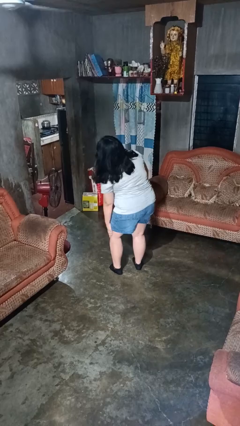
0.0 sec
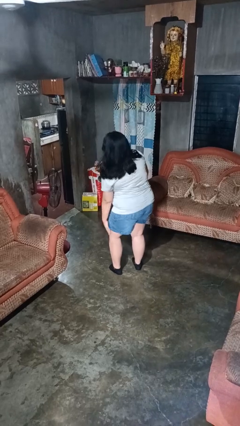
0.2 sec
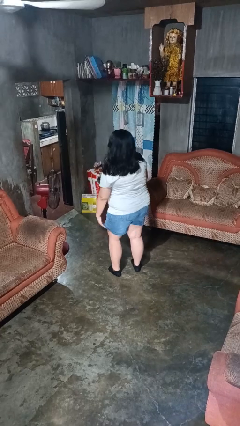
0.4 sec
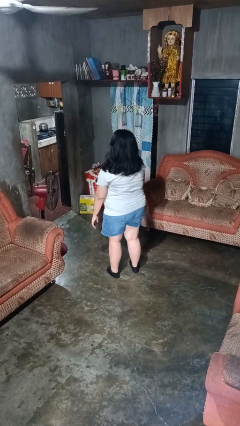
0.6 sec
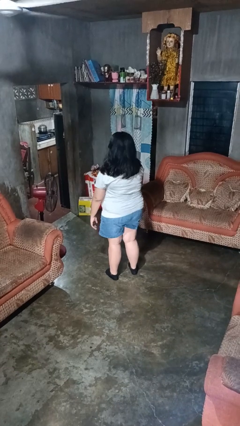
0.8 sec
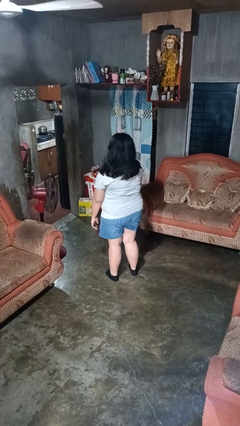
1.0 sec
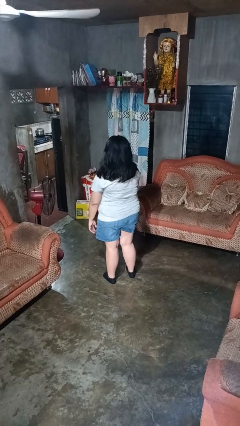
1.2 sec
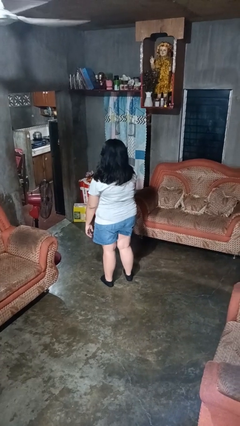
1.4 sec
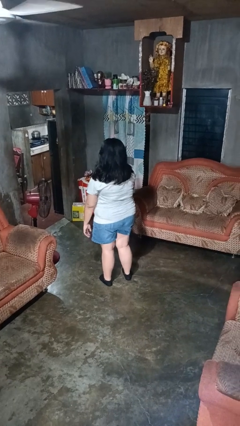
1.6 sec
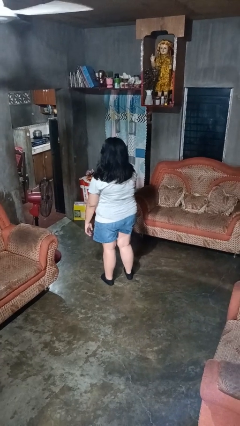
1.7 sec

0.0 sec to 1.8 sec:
person swats bug

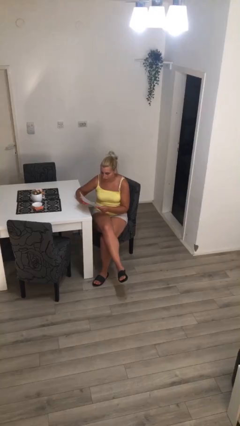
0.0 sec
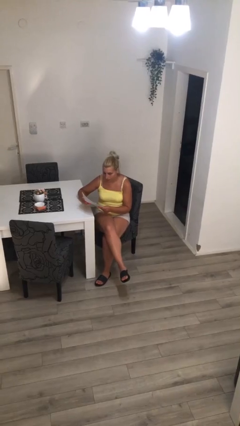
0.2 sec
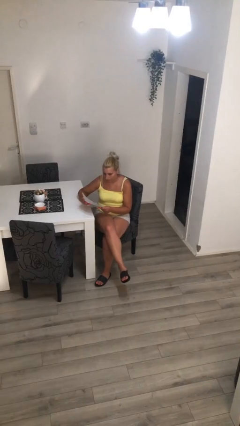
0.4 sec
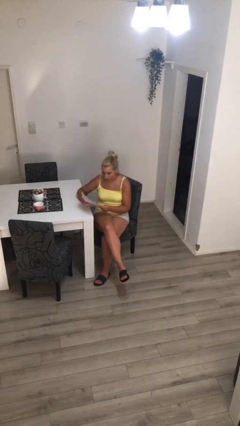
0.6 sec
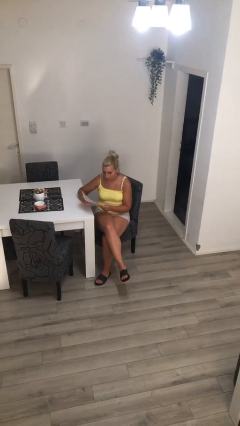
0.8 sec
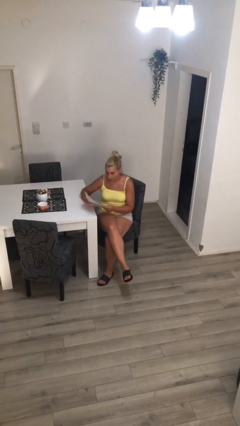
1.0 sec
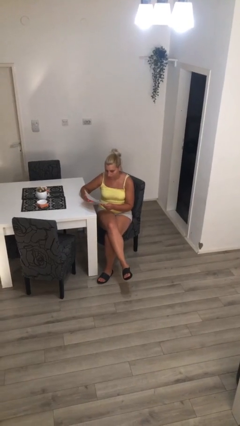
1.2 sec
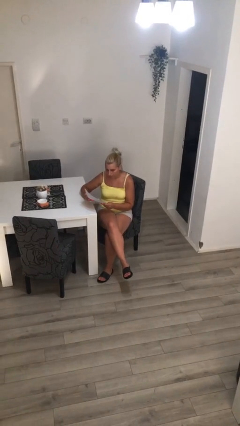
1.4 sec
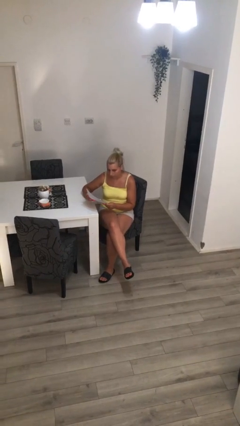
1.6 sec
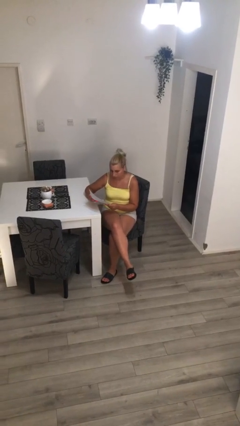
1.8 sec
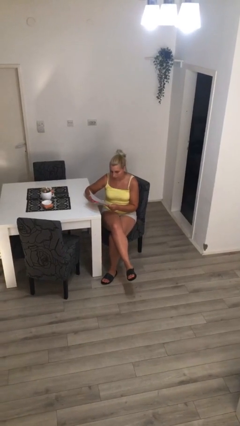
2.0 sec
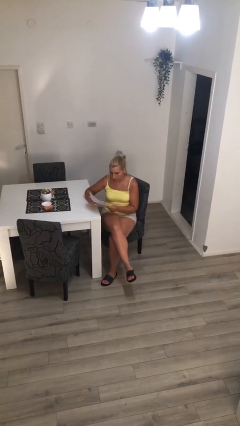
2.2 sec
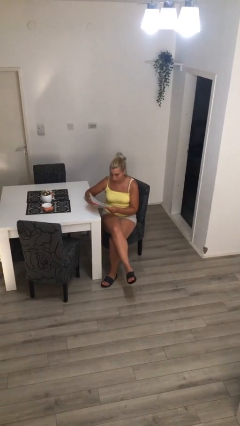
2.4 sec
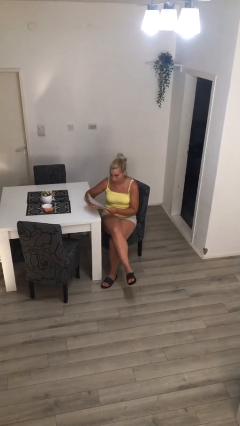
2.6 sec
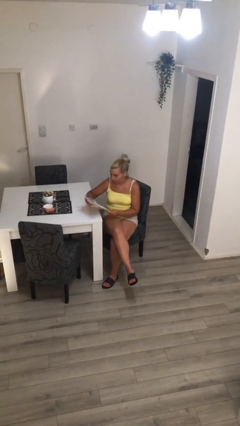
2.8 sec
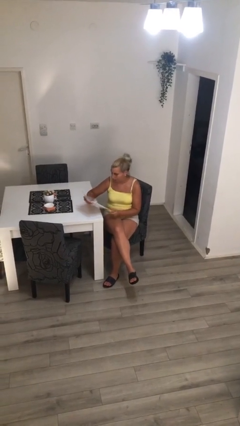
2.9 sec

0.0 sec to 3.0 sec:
person reads document

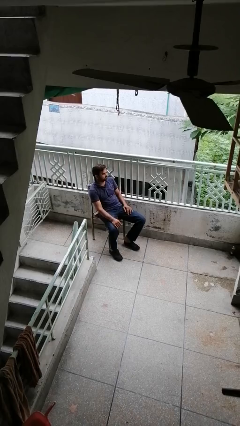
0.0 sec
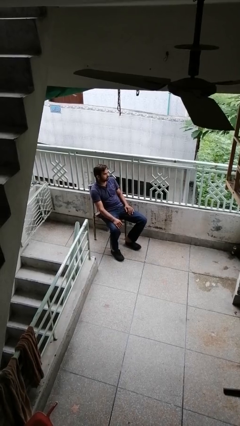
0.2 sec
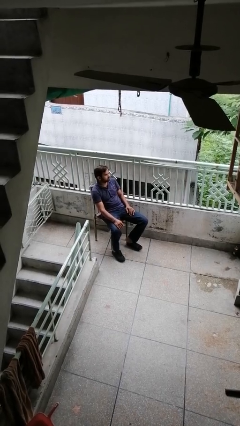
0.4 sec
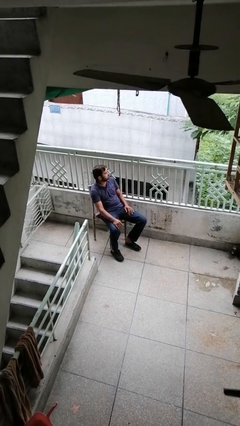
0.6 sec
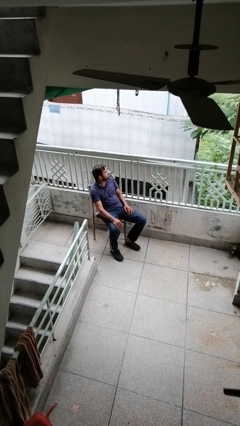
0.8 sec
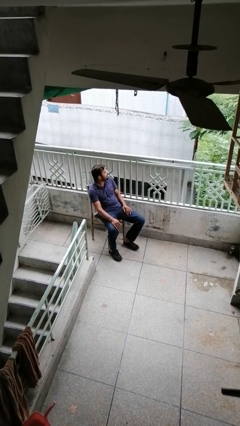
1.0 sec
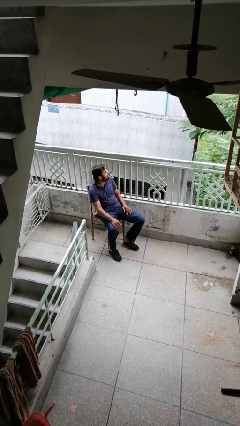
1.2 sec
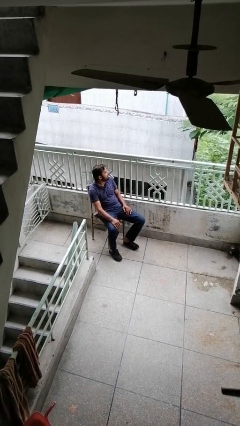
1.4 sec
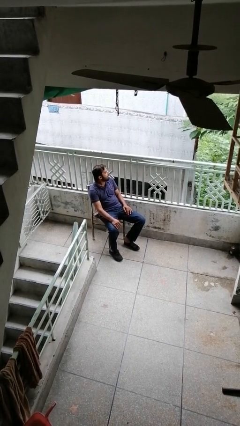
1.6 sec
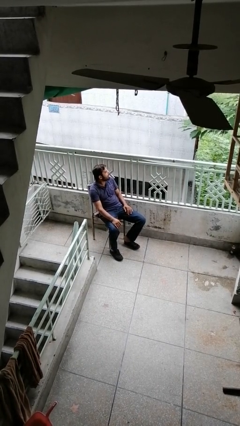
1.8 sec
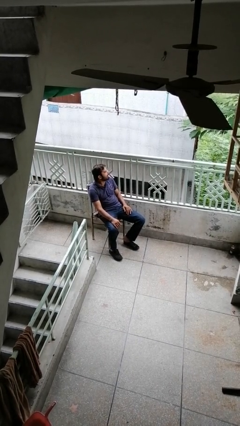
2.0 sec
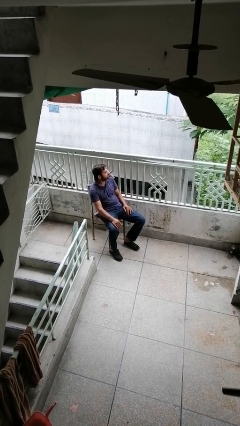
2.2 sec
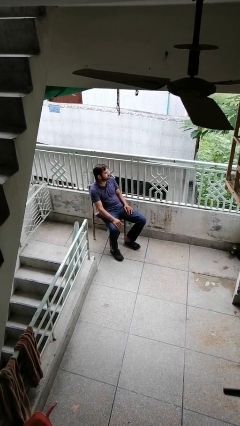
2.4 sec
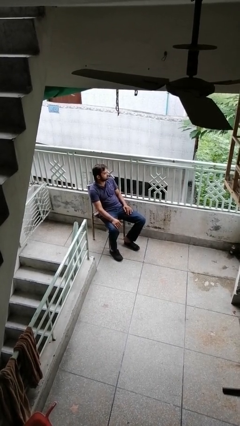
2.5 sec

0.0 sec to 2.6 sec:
person sticks out tongue

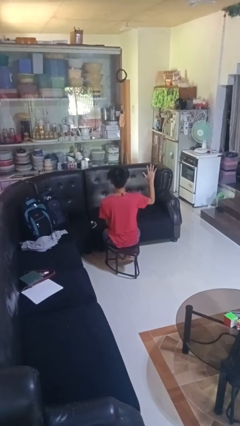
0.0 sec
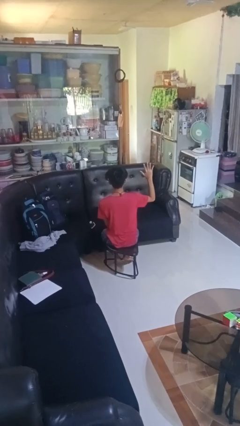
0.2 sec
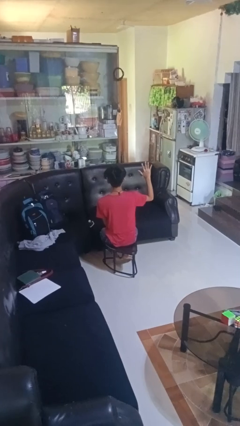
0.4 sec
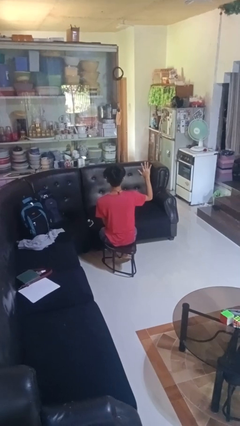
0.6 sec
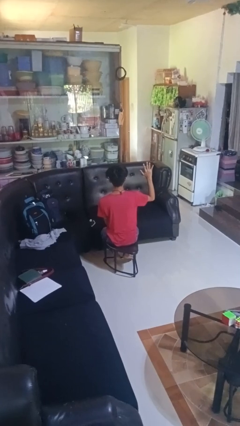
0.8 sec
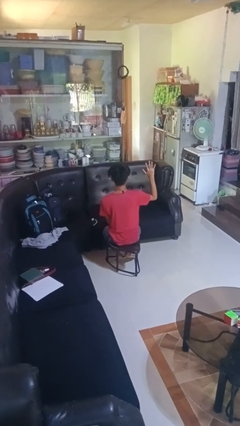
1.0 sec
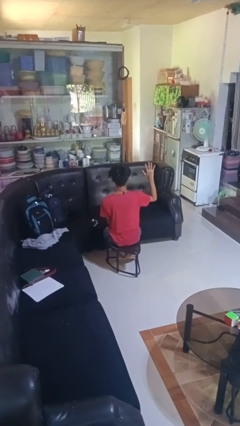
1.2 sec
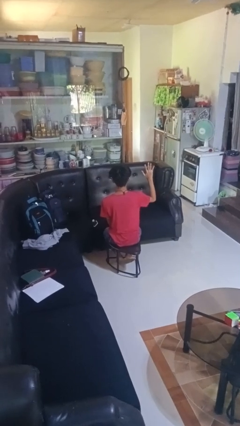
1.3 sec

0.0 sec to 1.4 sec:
person gestures number five

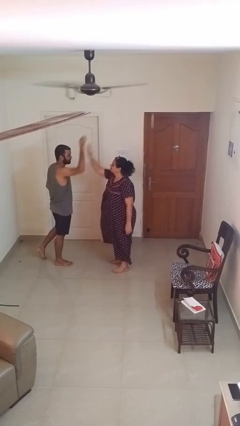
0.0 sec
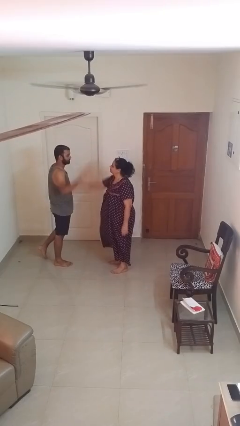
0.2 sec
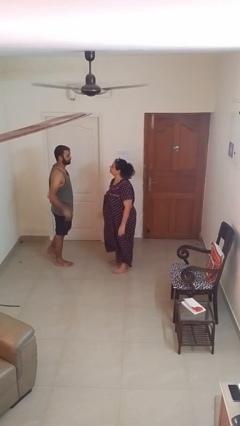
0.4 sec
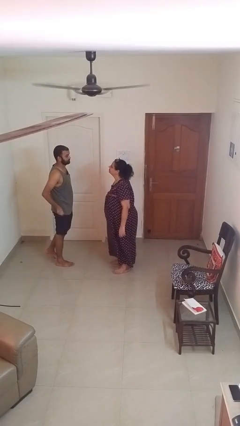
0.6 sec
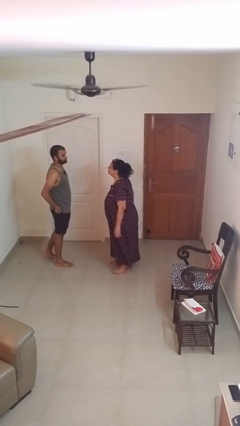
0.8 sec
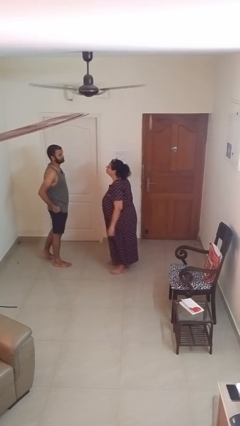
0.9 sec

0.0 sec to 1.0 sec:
person highfives hand

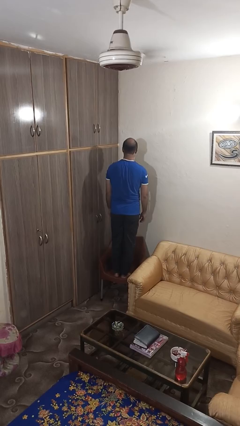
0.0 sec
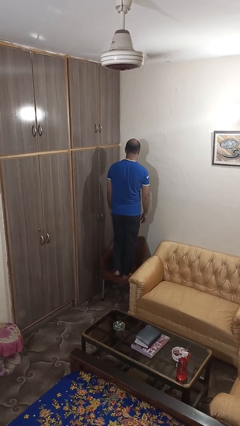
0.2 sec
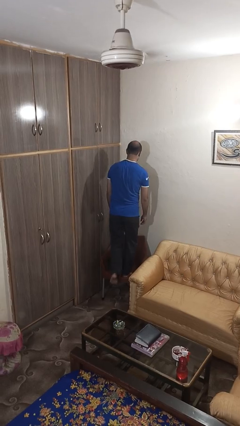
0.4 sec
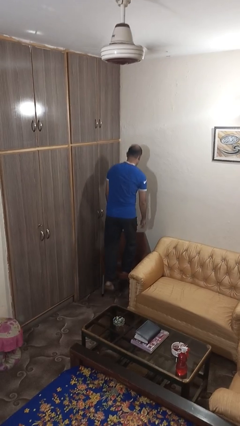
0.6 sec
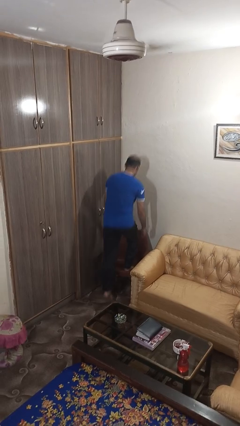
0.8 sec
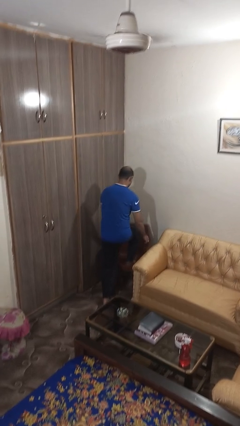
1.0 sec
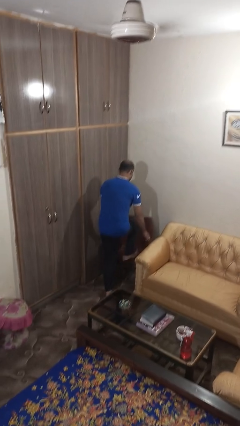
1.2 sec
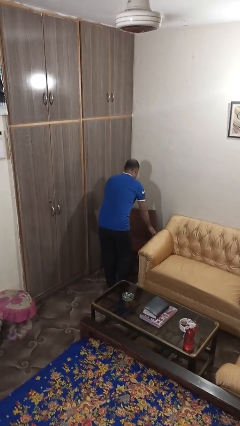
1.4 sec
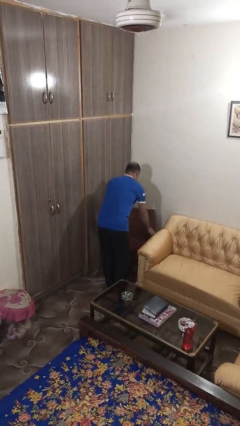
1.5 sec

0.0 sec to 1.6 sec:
person climbs off chair

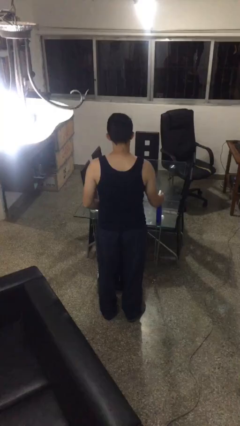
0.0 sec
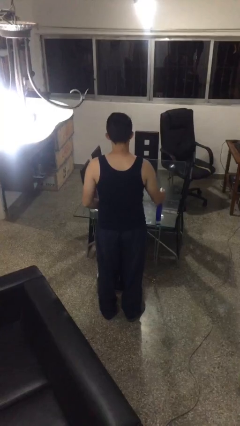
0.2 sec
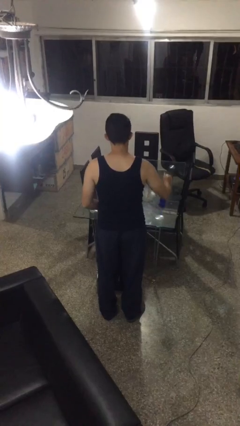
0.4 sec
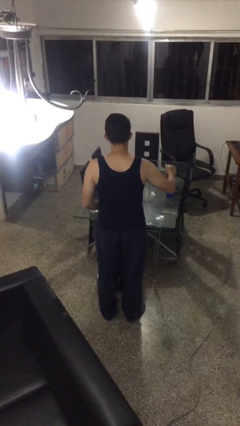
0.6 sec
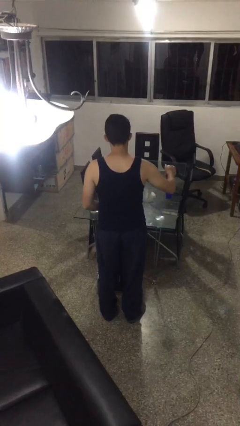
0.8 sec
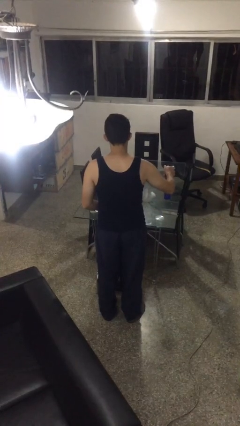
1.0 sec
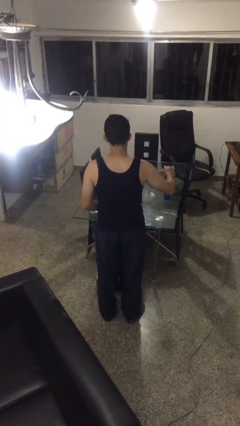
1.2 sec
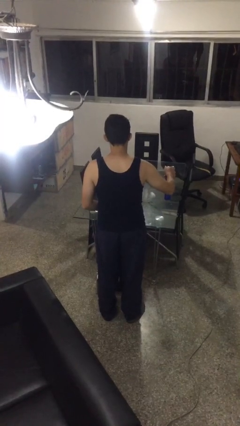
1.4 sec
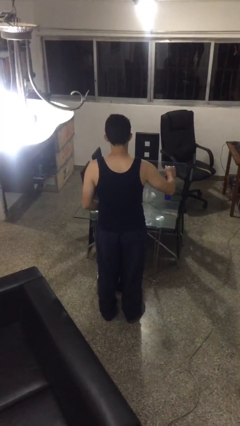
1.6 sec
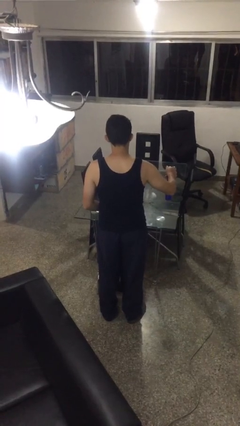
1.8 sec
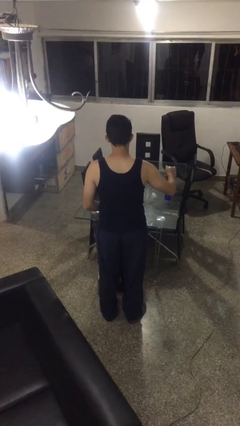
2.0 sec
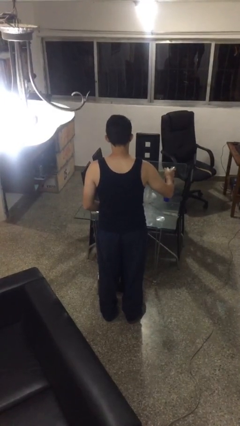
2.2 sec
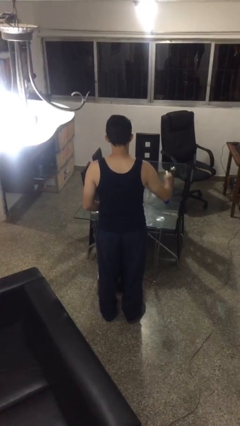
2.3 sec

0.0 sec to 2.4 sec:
person sprays from bottle

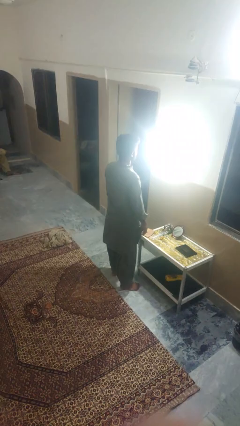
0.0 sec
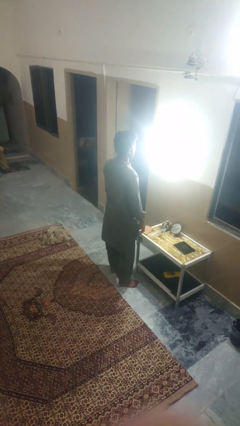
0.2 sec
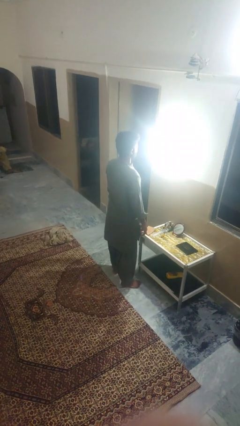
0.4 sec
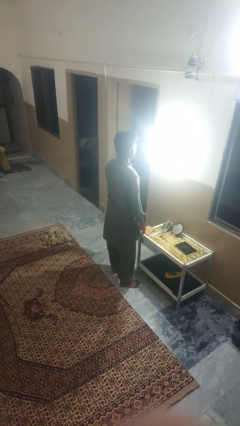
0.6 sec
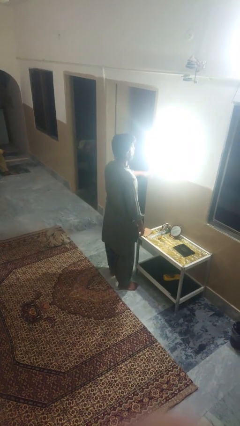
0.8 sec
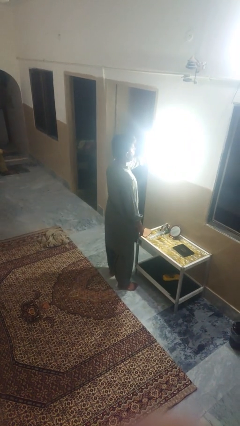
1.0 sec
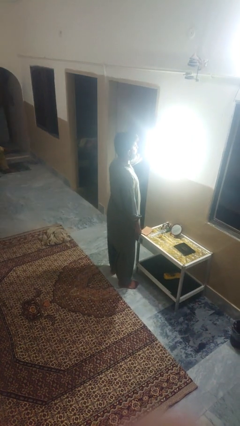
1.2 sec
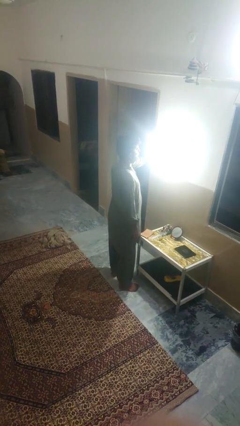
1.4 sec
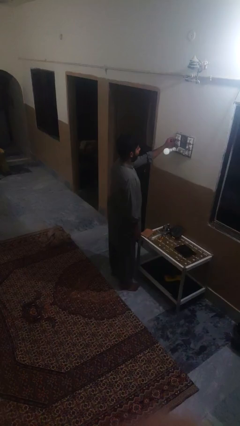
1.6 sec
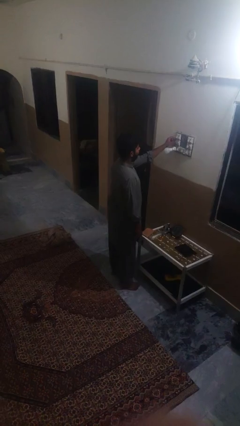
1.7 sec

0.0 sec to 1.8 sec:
person turns off lamp

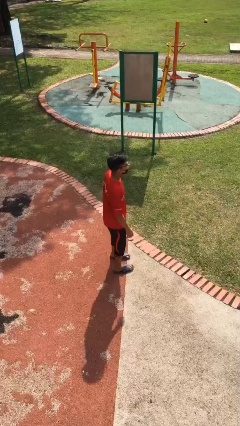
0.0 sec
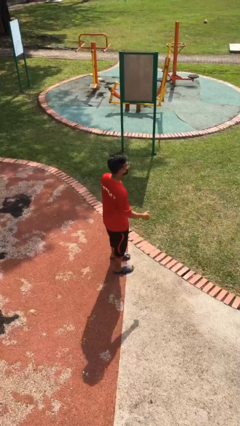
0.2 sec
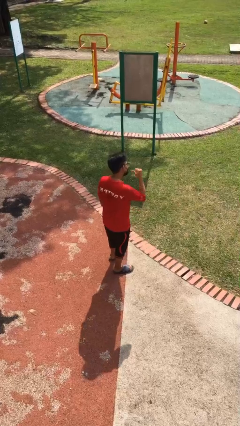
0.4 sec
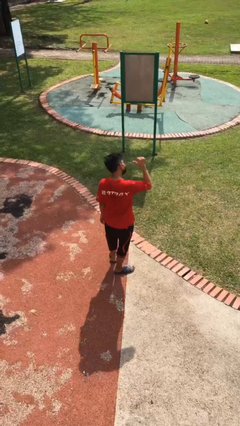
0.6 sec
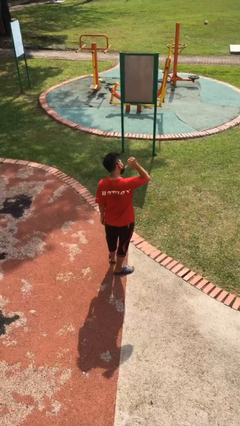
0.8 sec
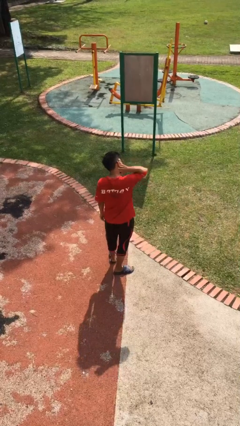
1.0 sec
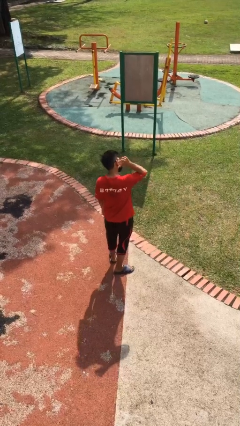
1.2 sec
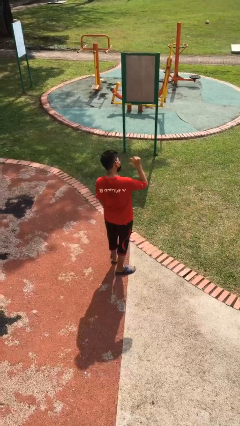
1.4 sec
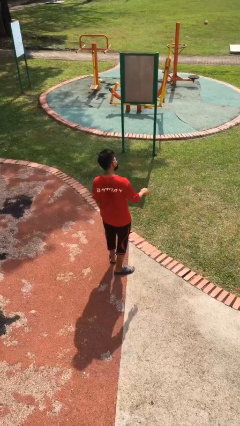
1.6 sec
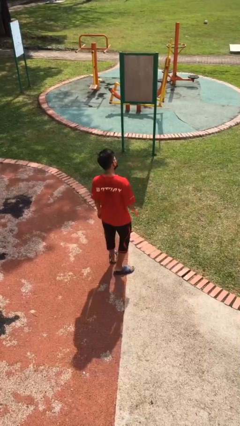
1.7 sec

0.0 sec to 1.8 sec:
person gestures behind me
